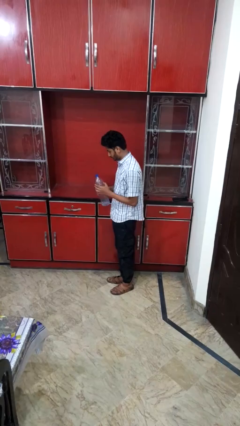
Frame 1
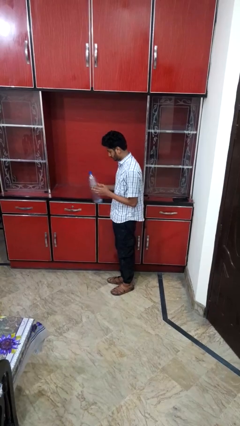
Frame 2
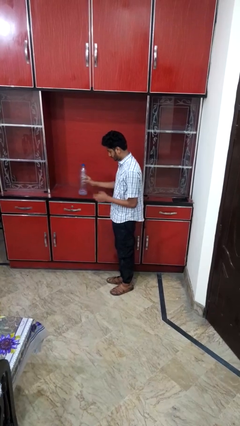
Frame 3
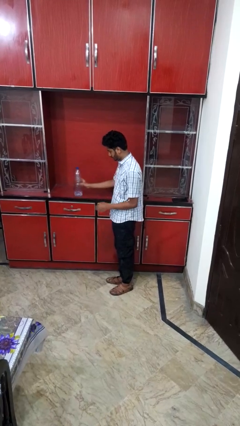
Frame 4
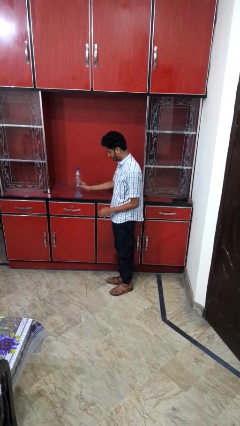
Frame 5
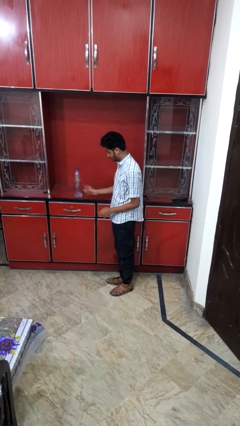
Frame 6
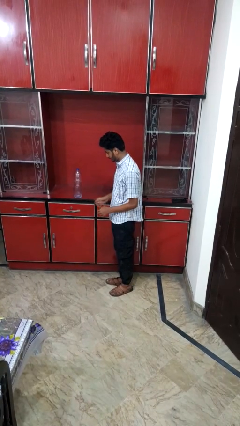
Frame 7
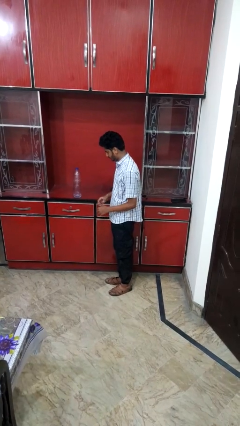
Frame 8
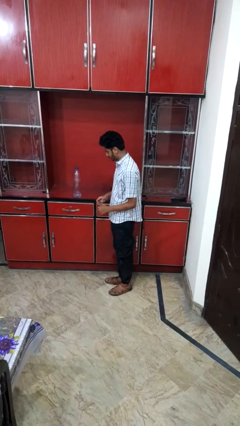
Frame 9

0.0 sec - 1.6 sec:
person puts down object on countertop

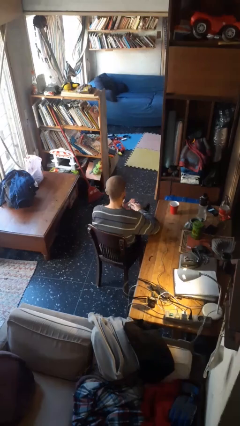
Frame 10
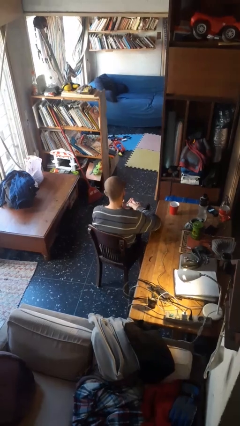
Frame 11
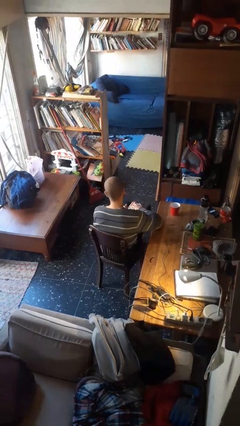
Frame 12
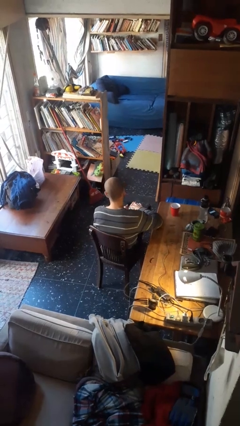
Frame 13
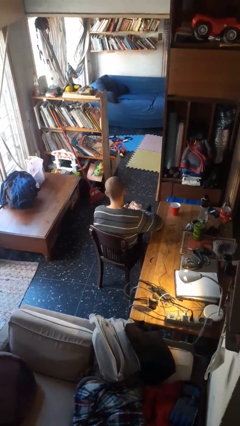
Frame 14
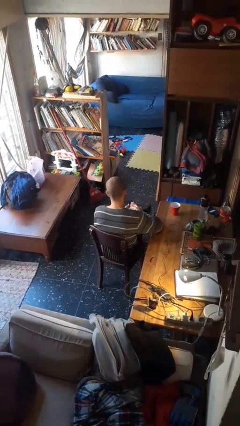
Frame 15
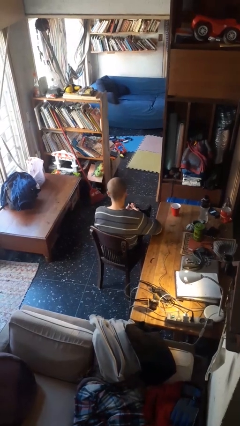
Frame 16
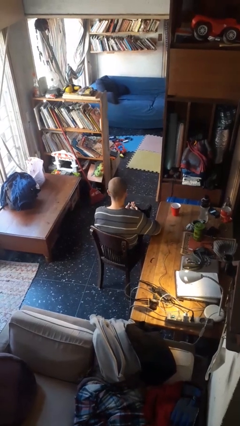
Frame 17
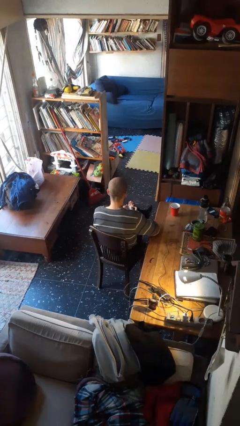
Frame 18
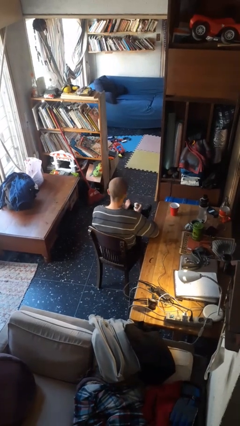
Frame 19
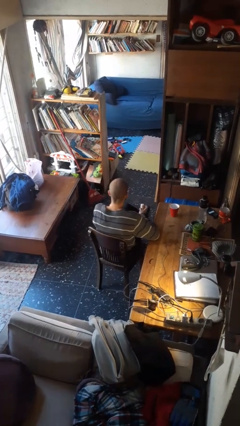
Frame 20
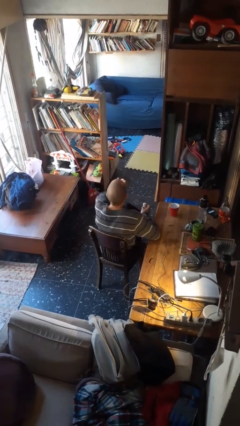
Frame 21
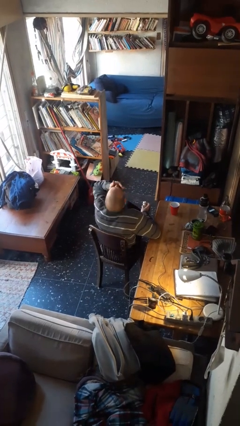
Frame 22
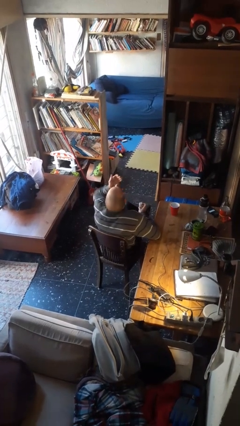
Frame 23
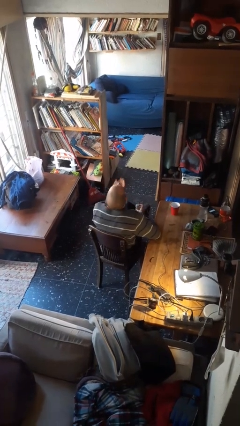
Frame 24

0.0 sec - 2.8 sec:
person takes medicine pills

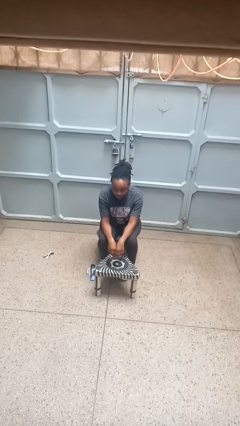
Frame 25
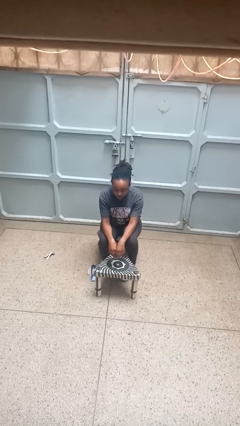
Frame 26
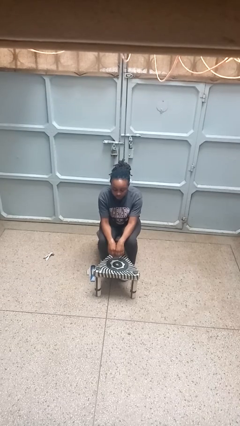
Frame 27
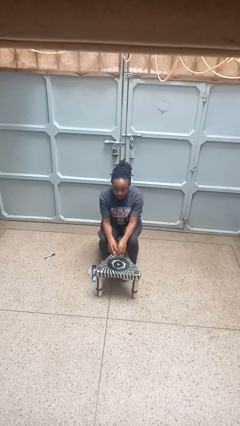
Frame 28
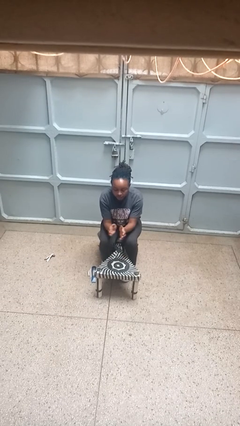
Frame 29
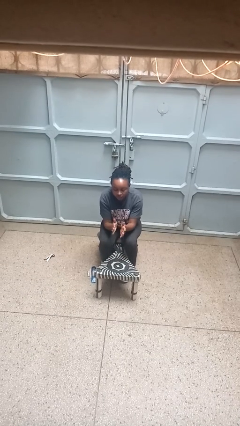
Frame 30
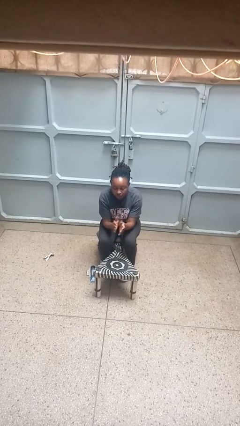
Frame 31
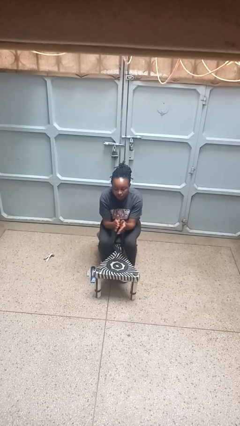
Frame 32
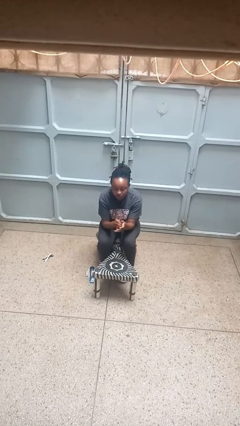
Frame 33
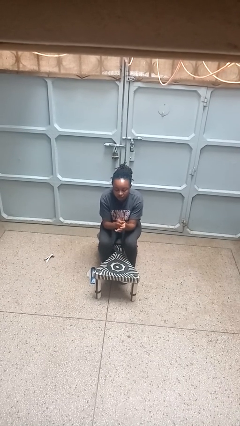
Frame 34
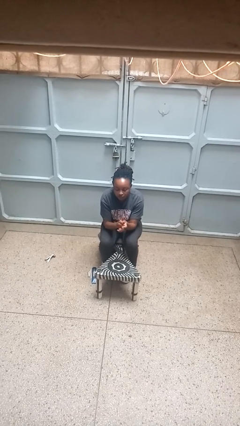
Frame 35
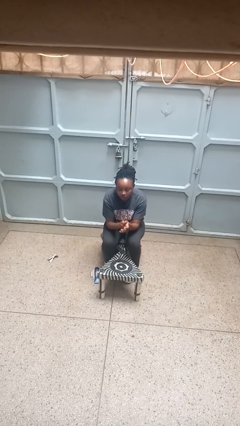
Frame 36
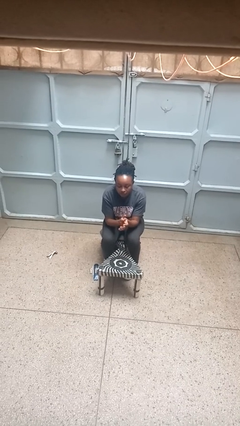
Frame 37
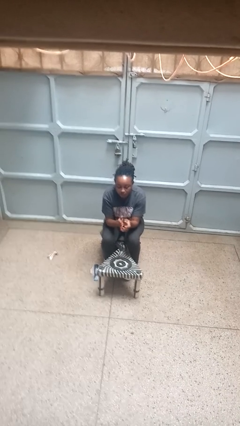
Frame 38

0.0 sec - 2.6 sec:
person claps hands

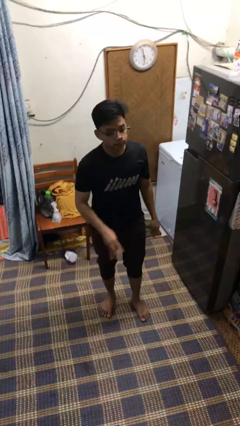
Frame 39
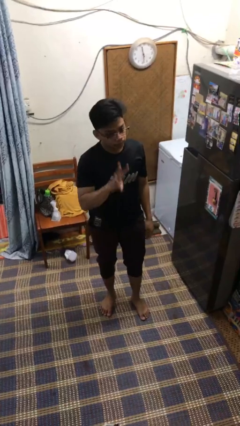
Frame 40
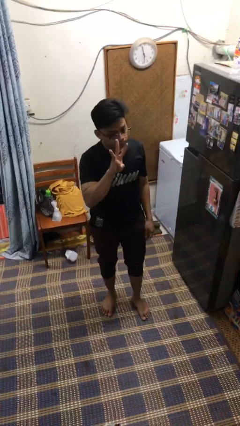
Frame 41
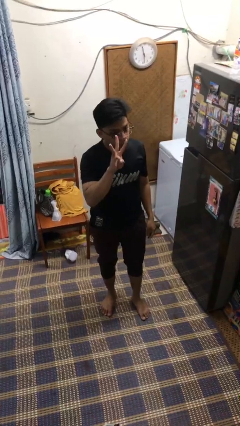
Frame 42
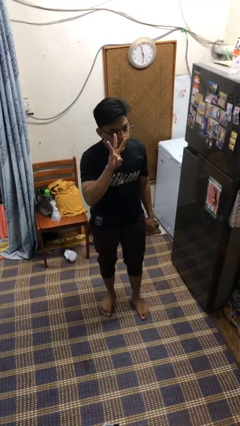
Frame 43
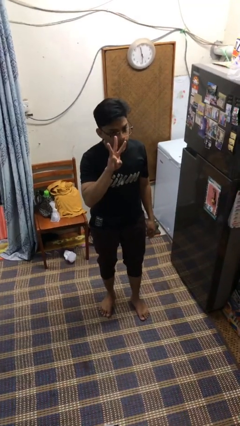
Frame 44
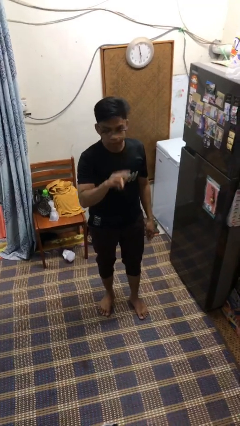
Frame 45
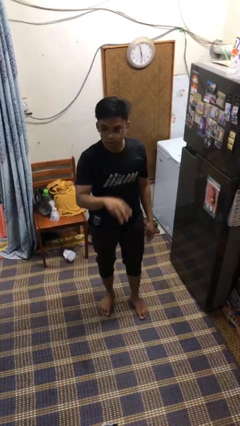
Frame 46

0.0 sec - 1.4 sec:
person gestures number three

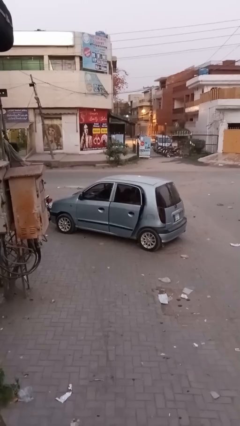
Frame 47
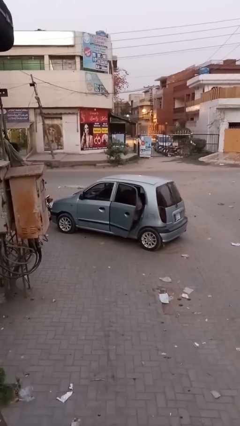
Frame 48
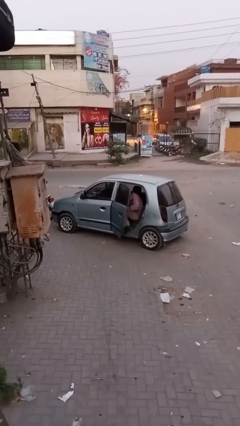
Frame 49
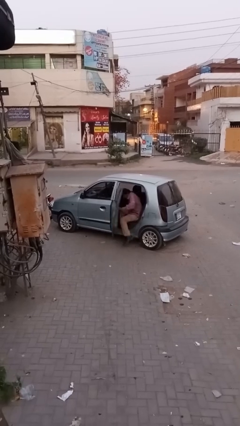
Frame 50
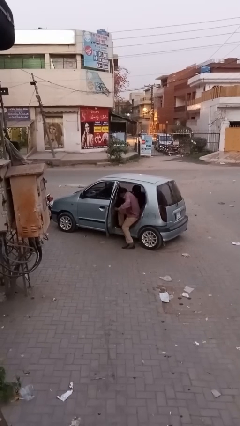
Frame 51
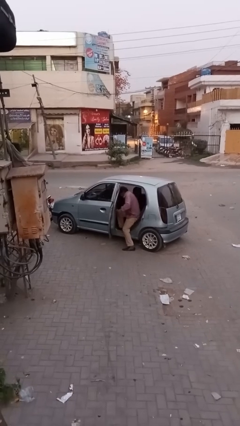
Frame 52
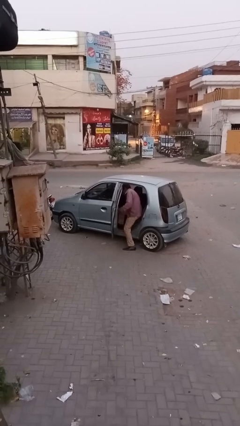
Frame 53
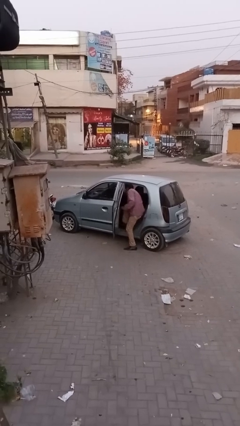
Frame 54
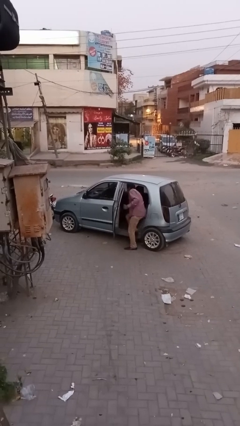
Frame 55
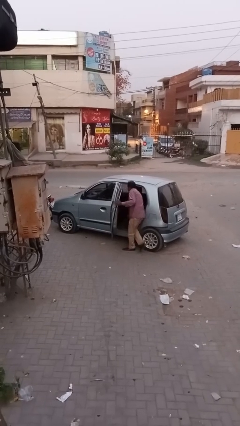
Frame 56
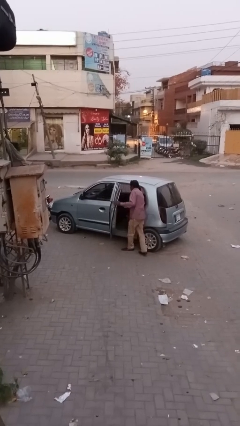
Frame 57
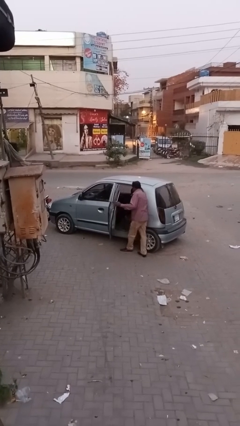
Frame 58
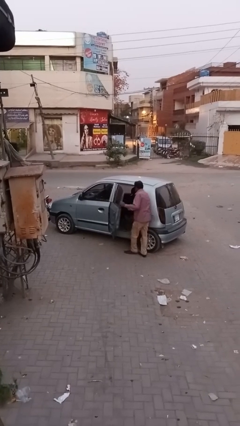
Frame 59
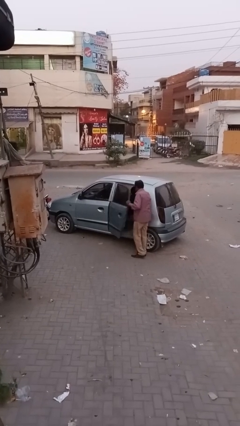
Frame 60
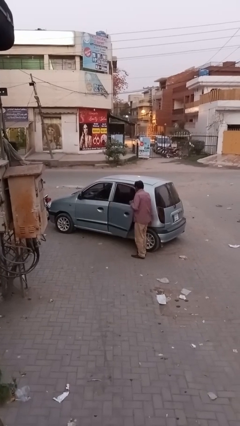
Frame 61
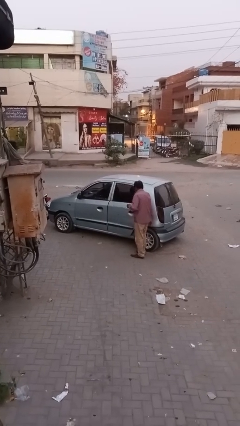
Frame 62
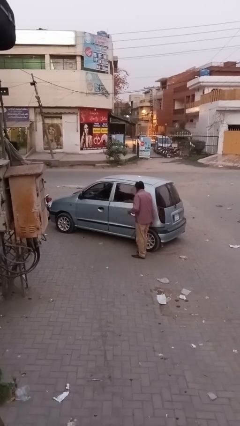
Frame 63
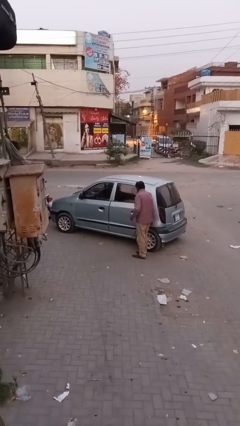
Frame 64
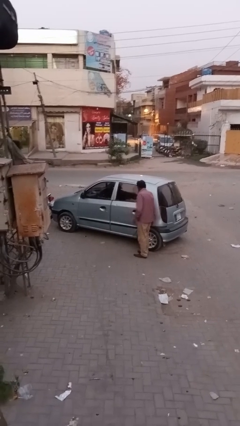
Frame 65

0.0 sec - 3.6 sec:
car drops off person

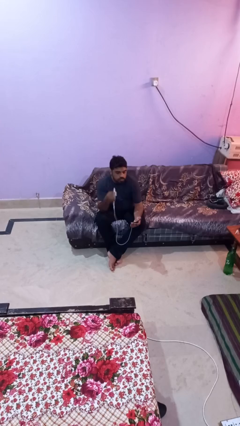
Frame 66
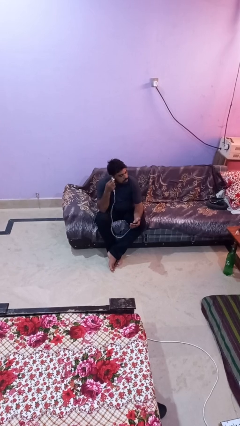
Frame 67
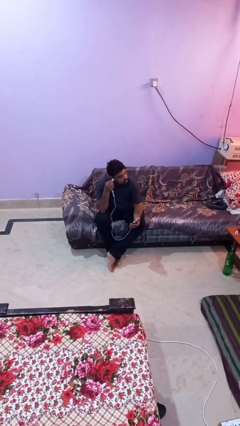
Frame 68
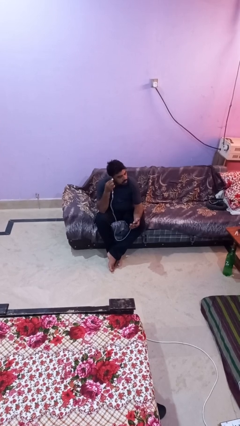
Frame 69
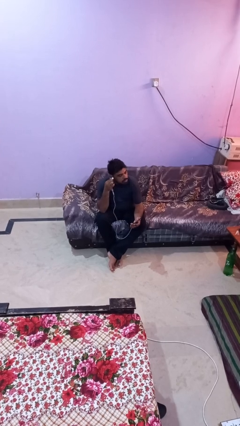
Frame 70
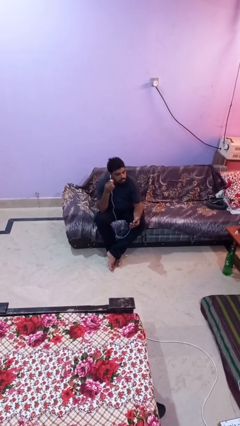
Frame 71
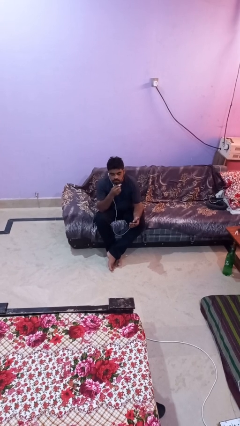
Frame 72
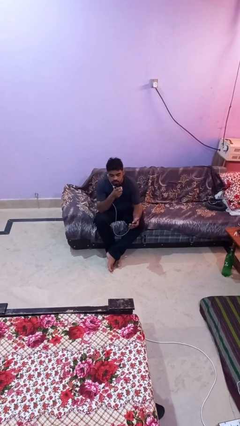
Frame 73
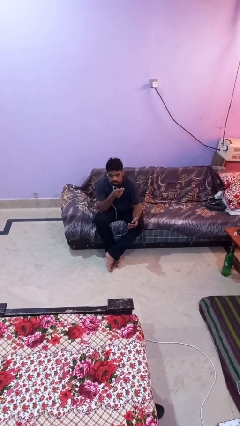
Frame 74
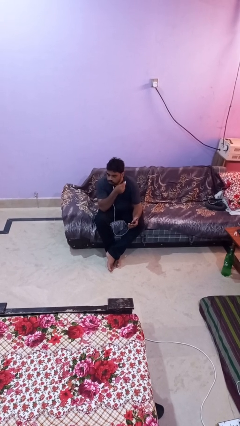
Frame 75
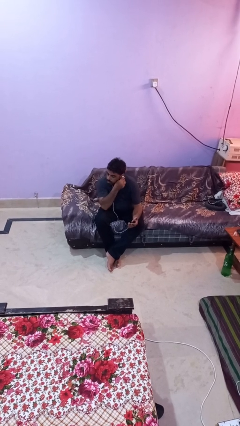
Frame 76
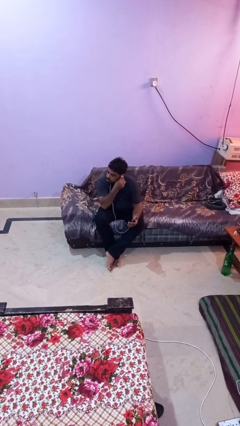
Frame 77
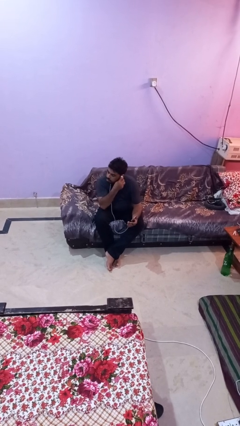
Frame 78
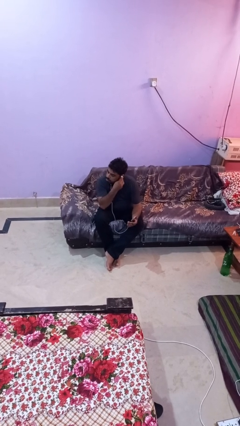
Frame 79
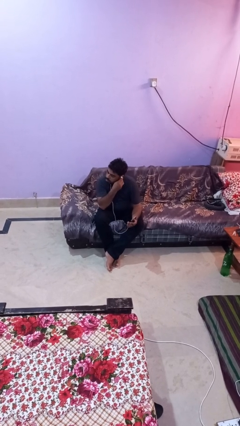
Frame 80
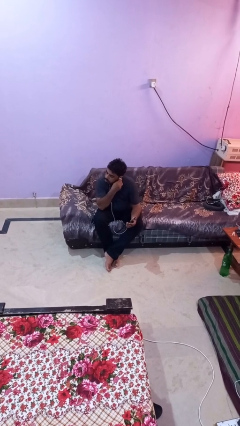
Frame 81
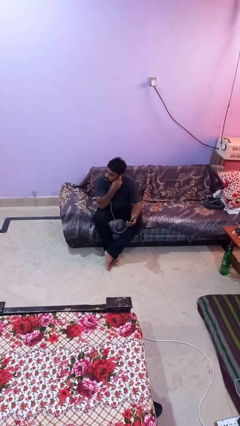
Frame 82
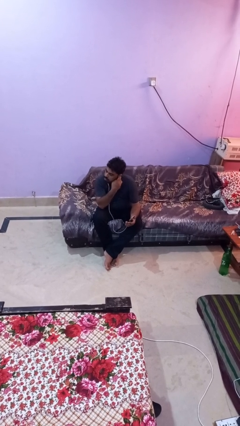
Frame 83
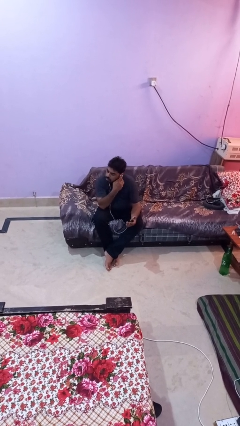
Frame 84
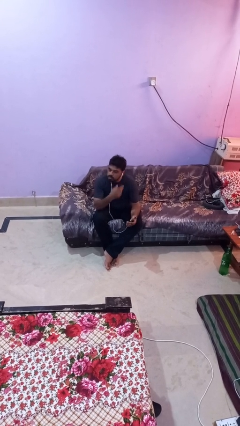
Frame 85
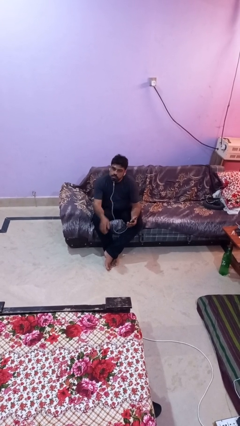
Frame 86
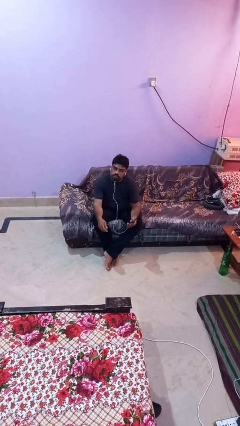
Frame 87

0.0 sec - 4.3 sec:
person puts on headphones

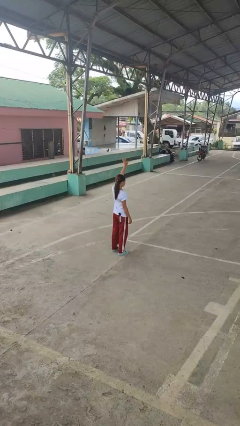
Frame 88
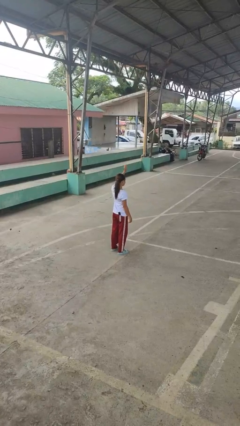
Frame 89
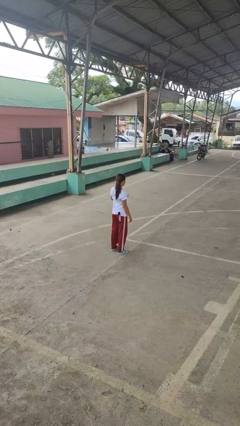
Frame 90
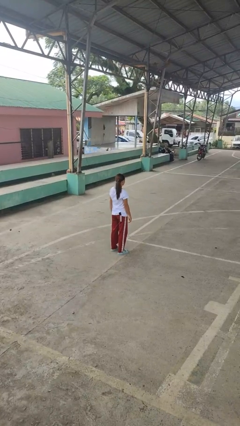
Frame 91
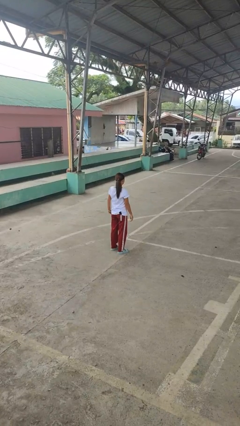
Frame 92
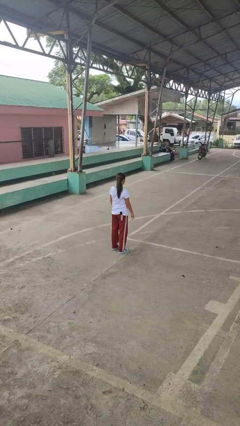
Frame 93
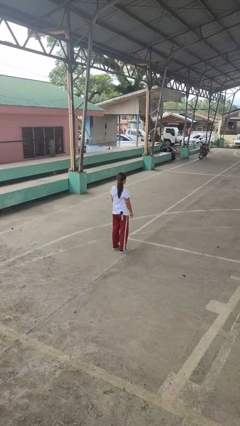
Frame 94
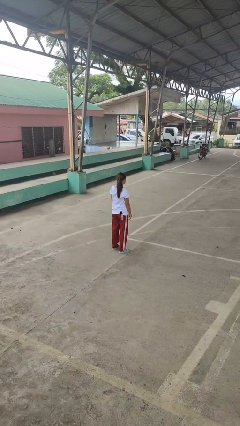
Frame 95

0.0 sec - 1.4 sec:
person gestures lower hand
